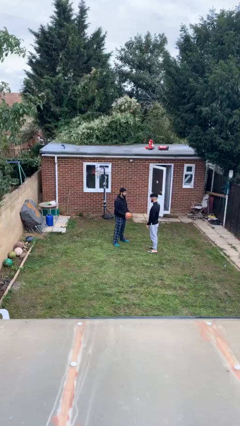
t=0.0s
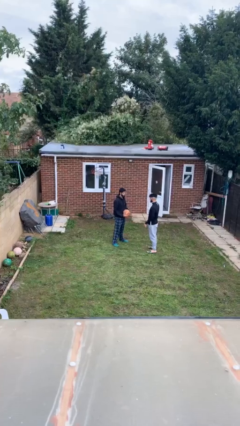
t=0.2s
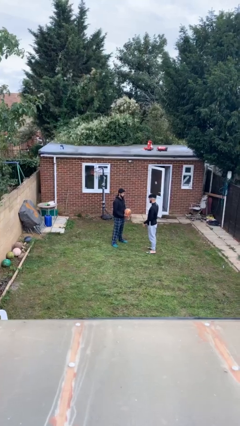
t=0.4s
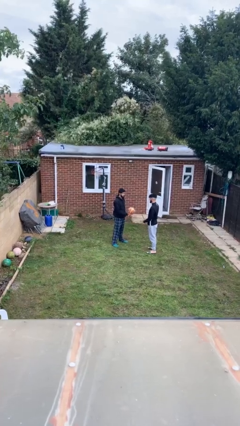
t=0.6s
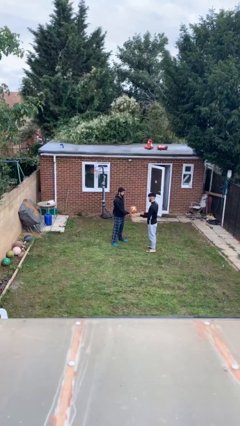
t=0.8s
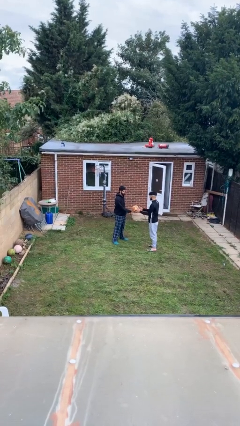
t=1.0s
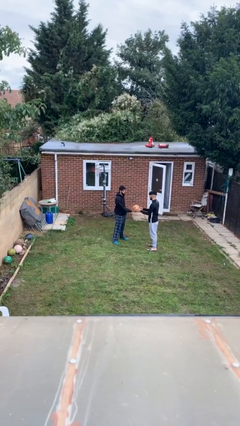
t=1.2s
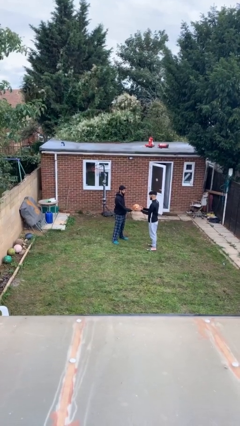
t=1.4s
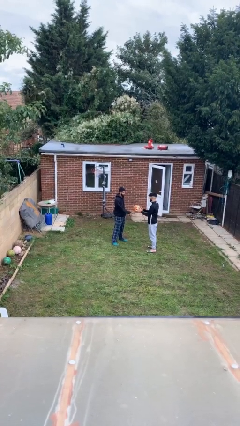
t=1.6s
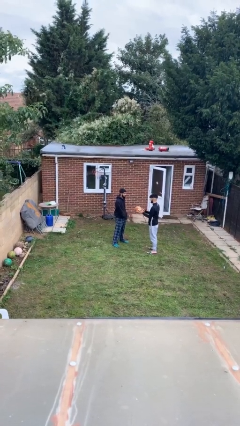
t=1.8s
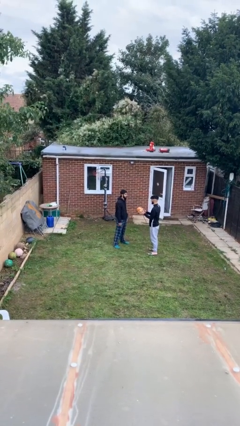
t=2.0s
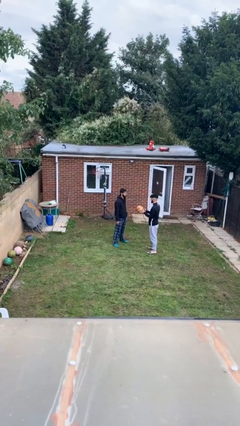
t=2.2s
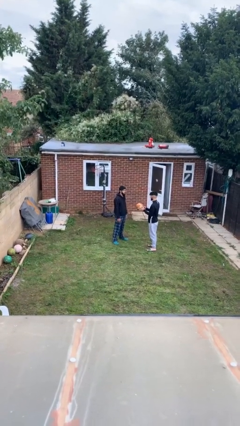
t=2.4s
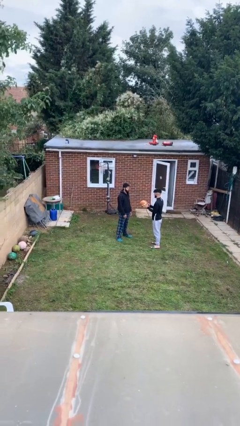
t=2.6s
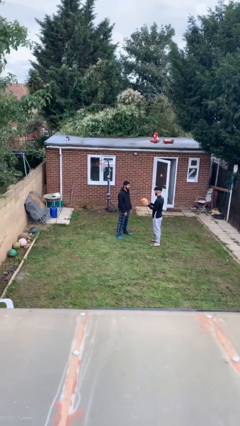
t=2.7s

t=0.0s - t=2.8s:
person transfers object to person

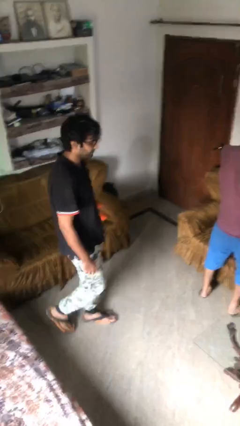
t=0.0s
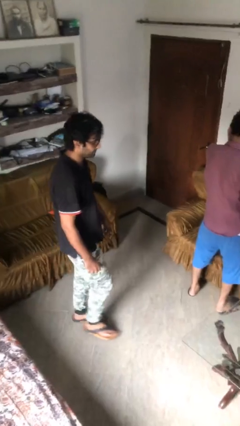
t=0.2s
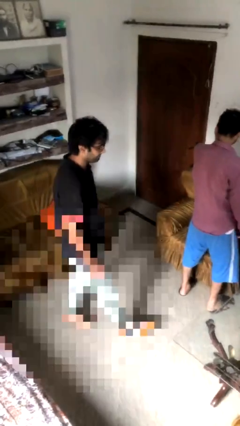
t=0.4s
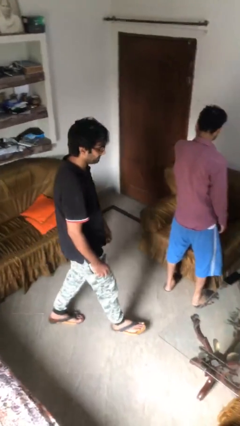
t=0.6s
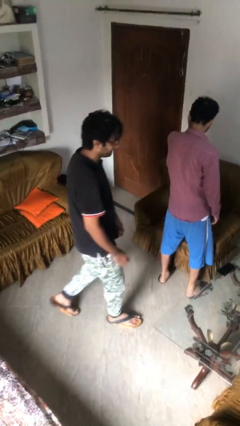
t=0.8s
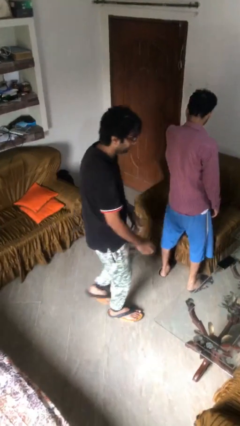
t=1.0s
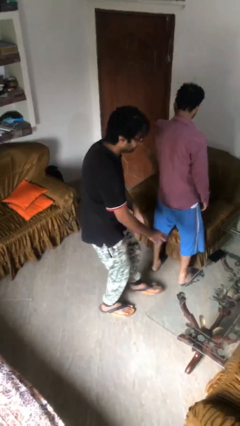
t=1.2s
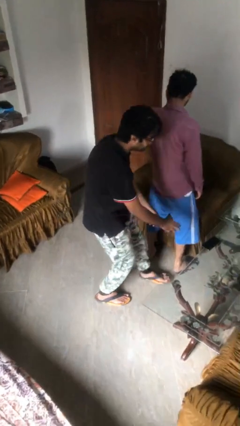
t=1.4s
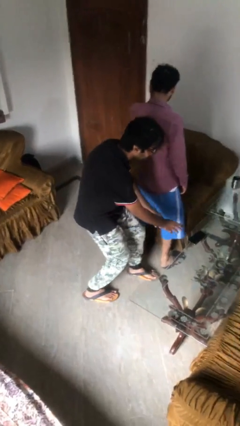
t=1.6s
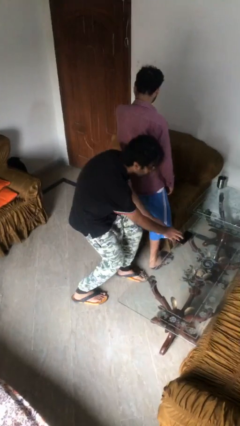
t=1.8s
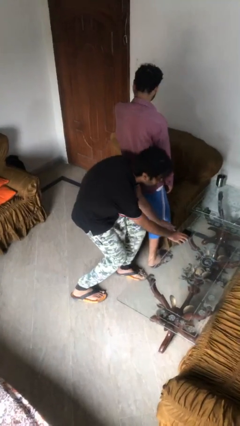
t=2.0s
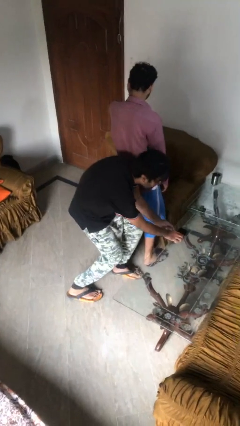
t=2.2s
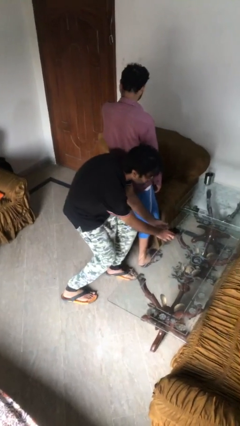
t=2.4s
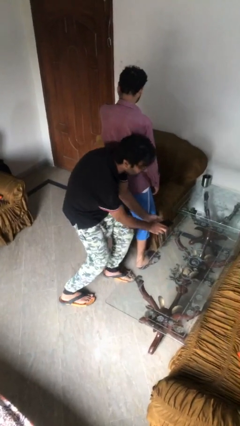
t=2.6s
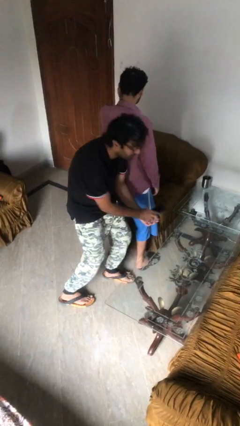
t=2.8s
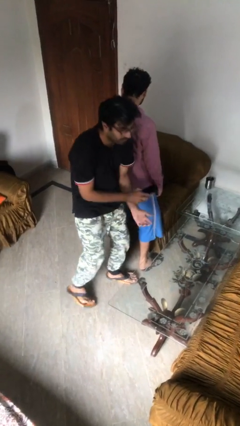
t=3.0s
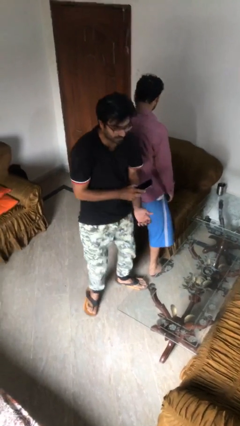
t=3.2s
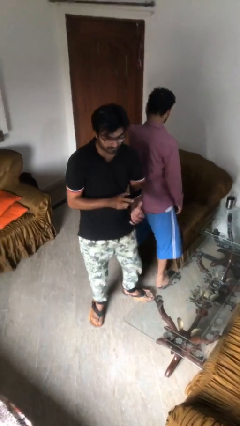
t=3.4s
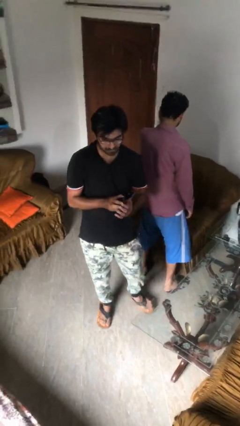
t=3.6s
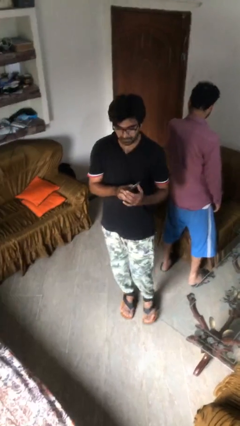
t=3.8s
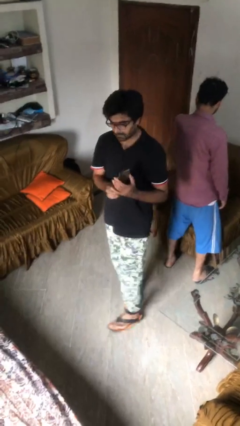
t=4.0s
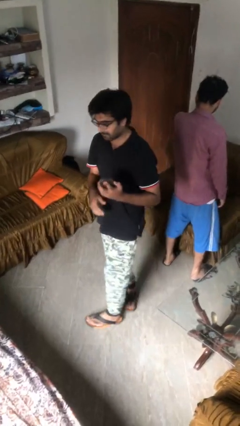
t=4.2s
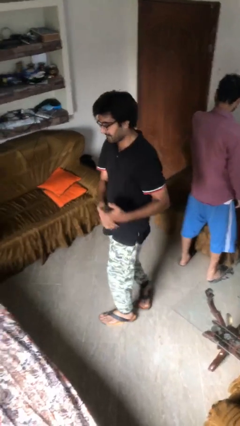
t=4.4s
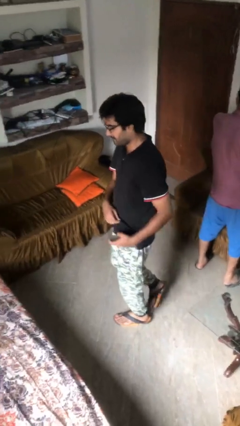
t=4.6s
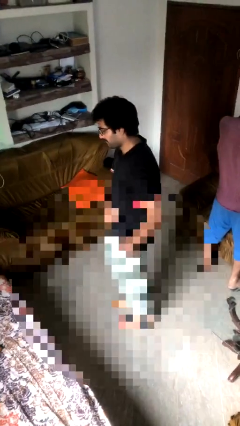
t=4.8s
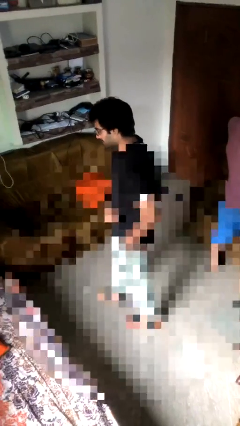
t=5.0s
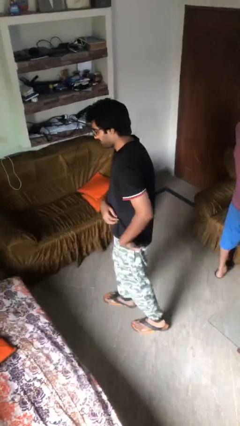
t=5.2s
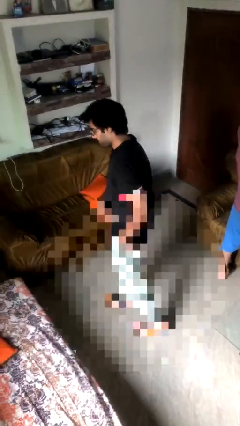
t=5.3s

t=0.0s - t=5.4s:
person steals object from person

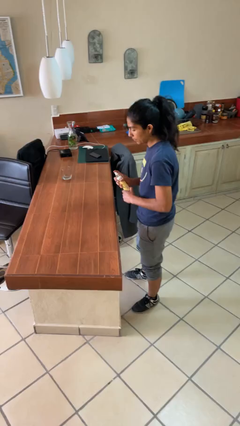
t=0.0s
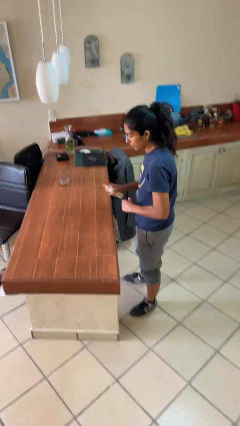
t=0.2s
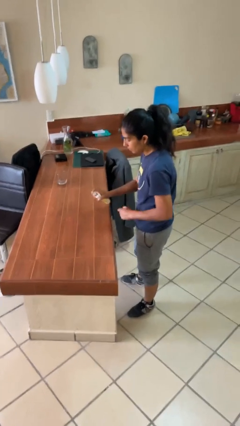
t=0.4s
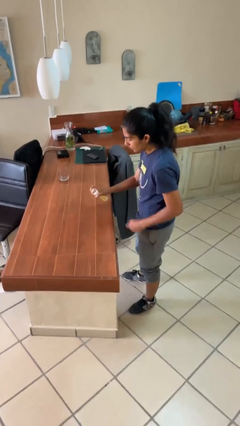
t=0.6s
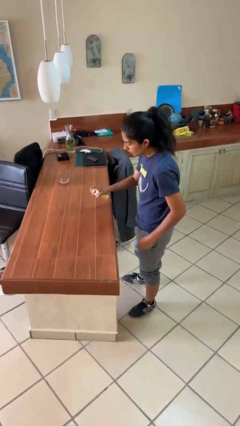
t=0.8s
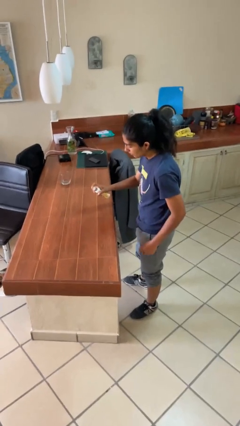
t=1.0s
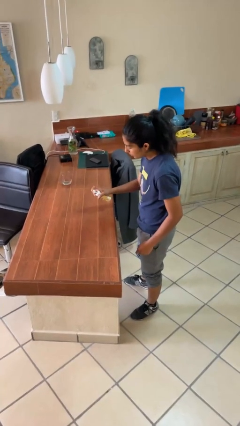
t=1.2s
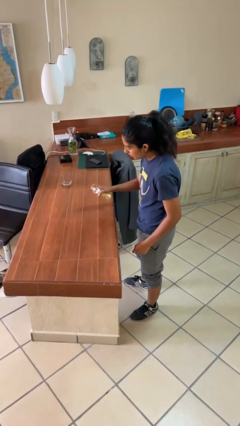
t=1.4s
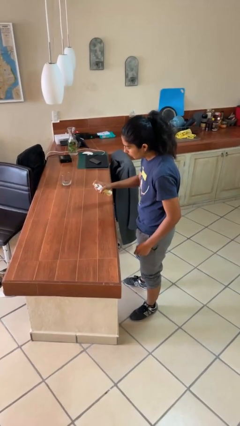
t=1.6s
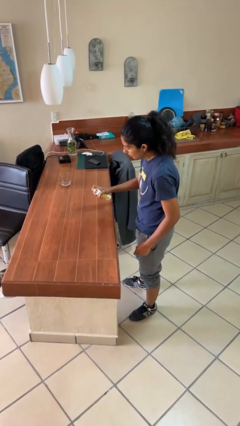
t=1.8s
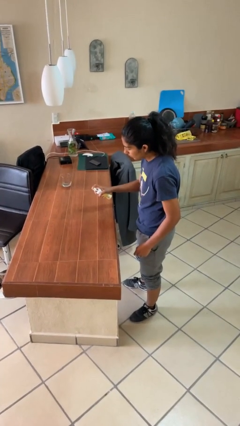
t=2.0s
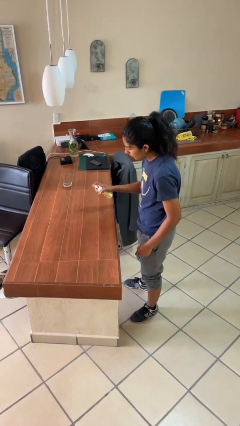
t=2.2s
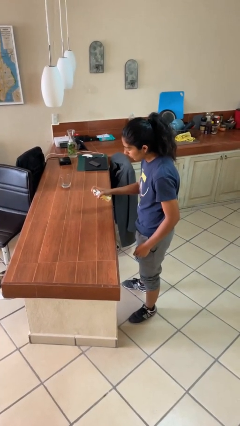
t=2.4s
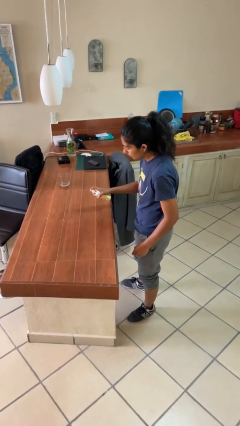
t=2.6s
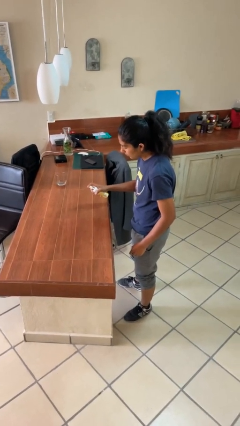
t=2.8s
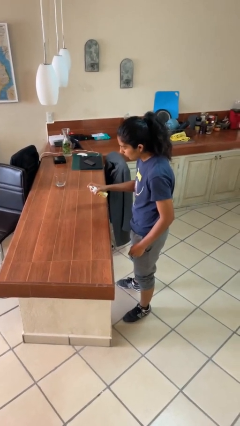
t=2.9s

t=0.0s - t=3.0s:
person sprays from bottle

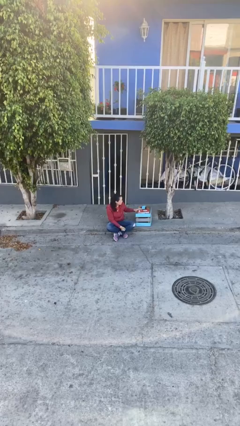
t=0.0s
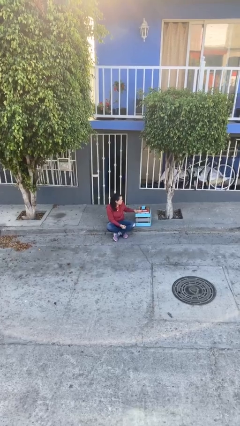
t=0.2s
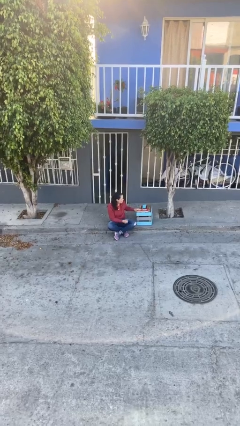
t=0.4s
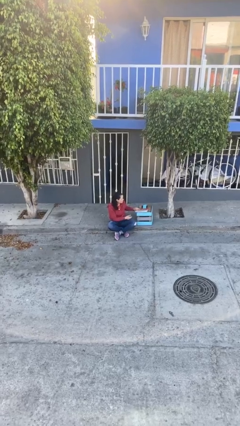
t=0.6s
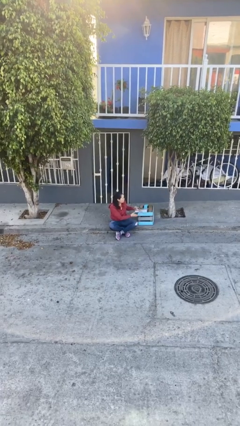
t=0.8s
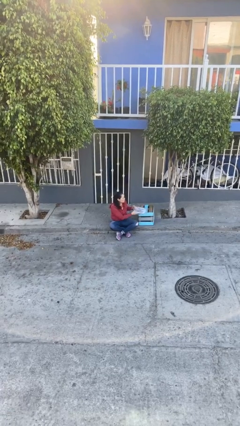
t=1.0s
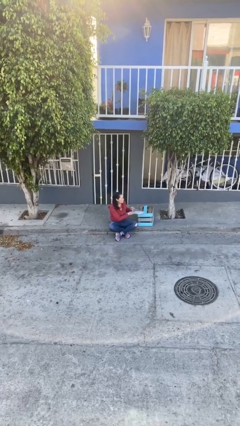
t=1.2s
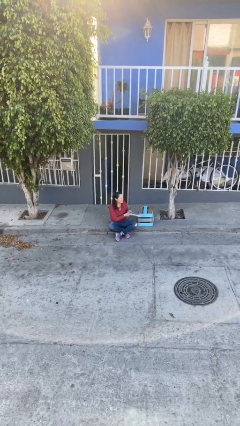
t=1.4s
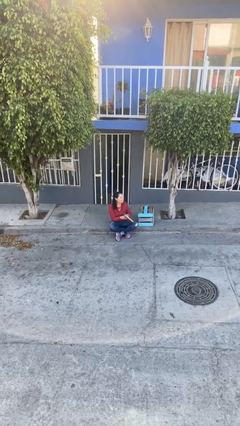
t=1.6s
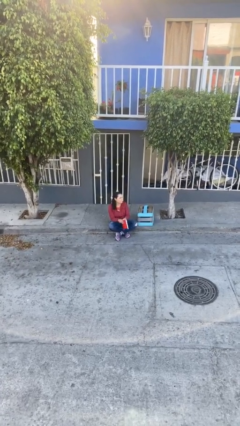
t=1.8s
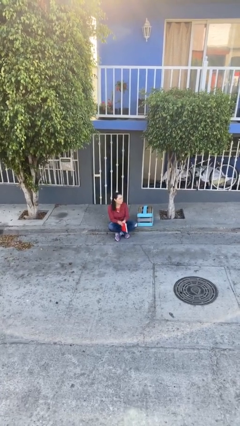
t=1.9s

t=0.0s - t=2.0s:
person picks up object from table

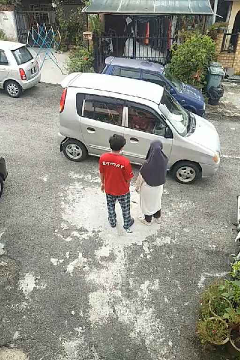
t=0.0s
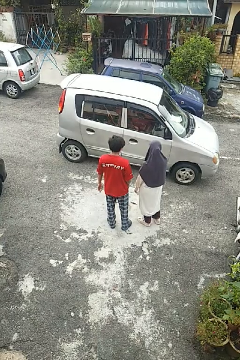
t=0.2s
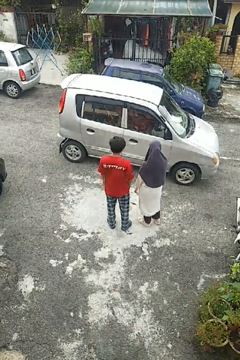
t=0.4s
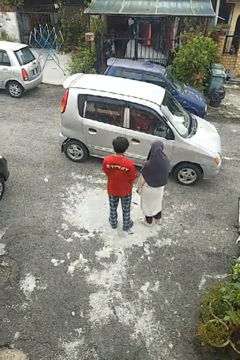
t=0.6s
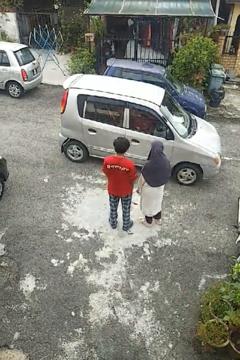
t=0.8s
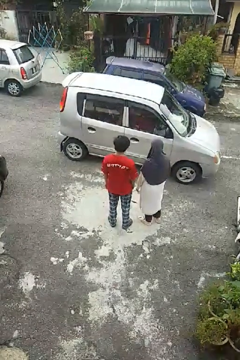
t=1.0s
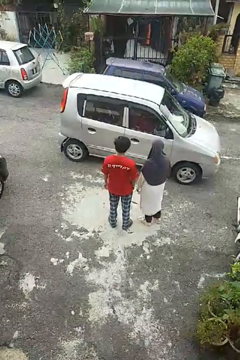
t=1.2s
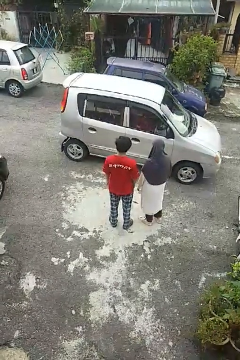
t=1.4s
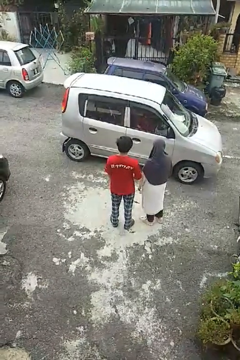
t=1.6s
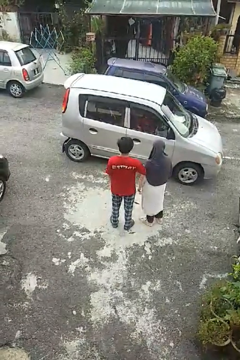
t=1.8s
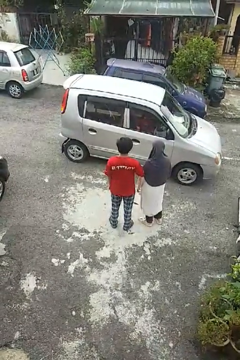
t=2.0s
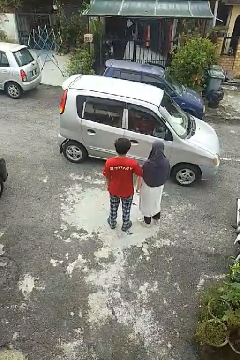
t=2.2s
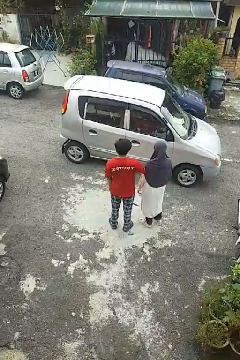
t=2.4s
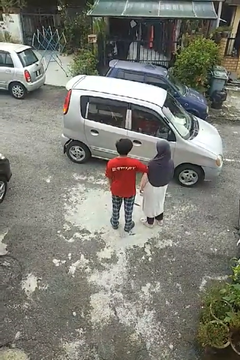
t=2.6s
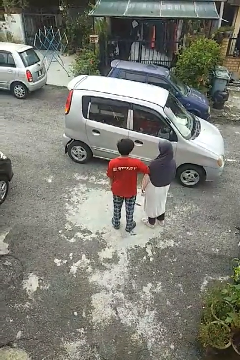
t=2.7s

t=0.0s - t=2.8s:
person nudges person with elbow

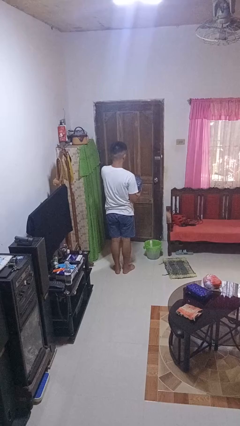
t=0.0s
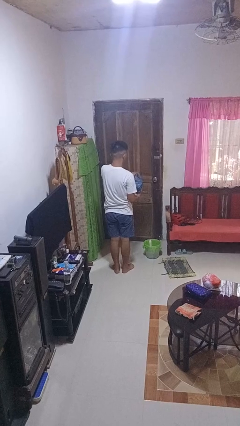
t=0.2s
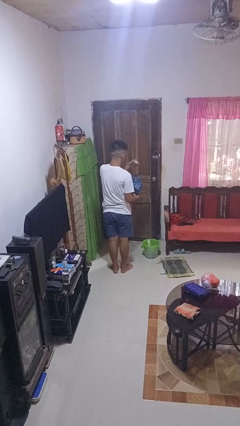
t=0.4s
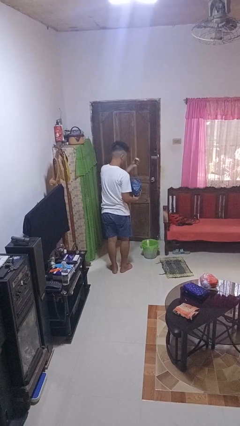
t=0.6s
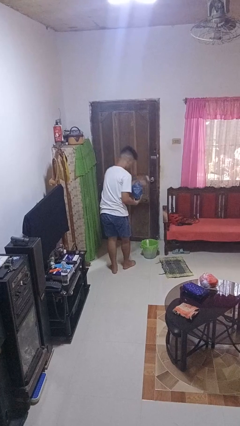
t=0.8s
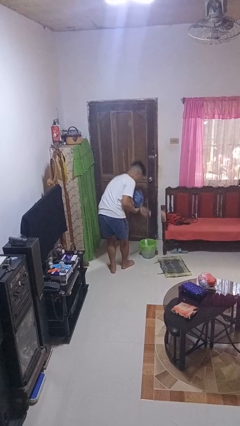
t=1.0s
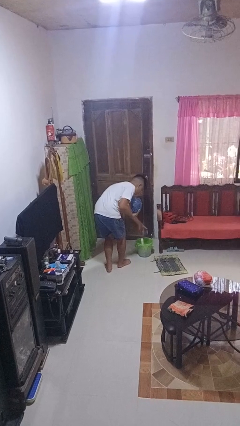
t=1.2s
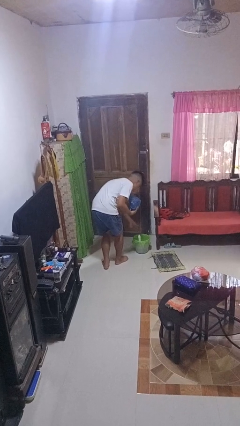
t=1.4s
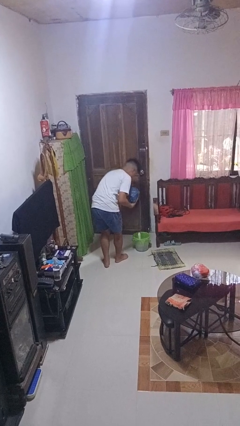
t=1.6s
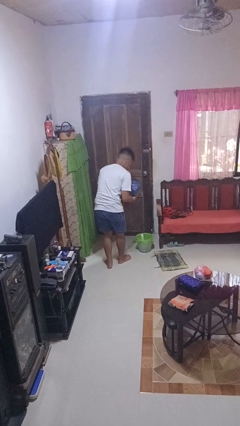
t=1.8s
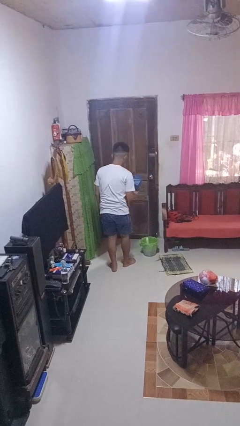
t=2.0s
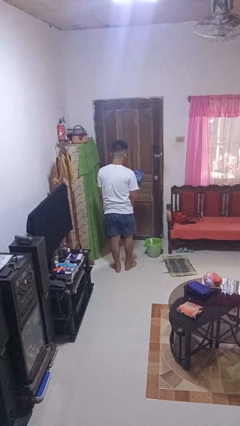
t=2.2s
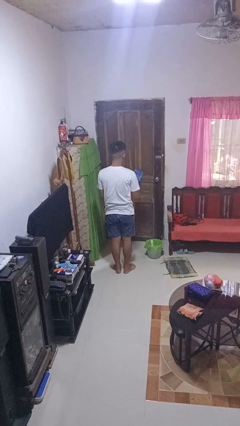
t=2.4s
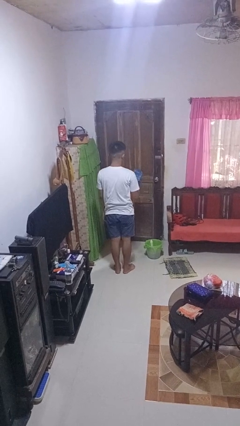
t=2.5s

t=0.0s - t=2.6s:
person discards trash
